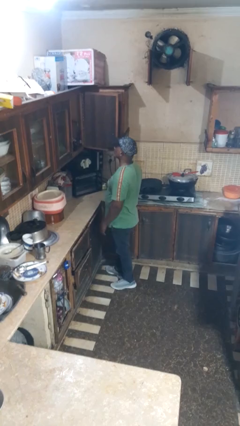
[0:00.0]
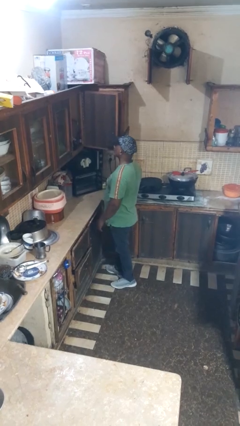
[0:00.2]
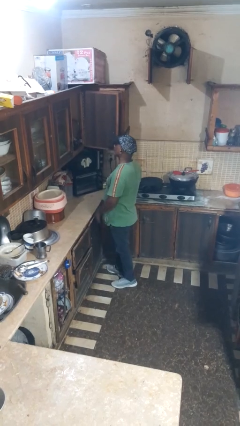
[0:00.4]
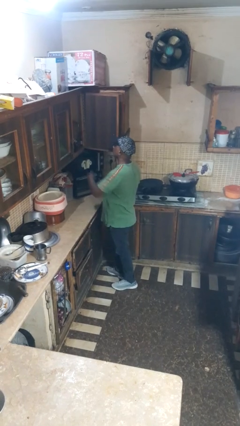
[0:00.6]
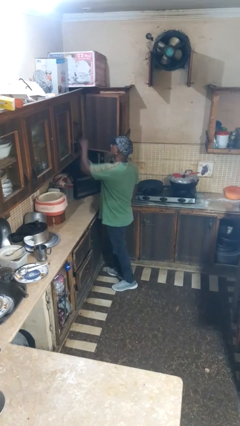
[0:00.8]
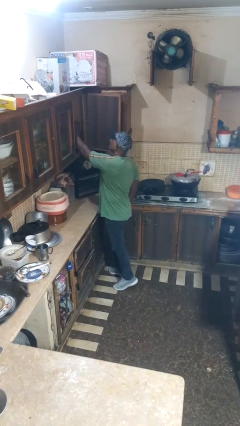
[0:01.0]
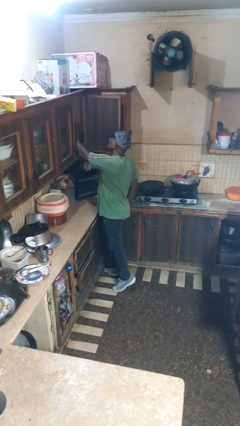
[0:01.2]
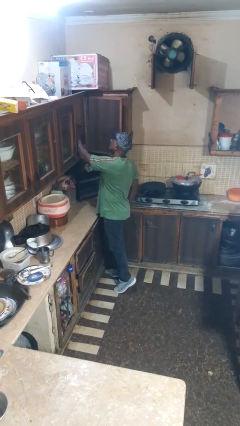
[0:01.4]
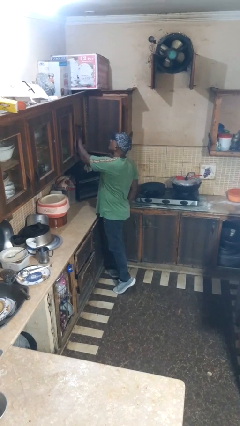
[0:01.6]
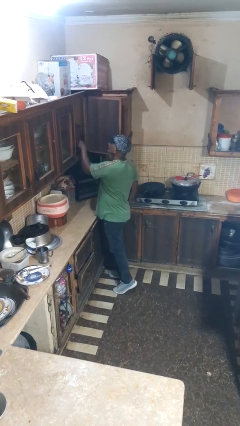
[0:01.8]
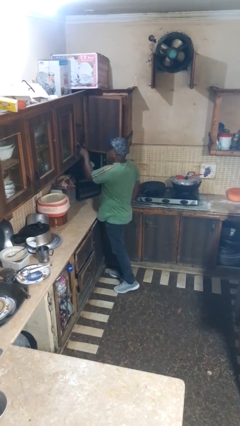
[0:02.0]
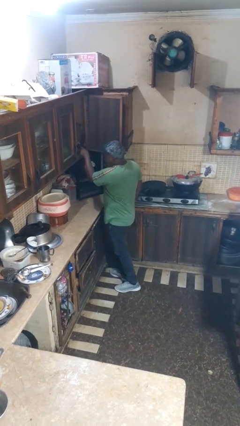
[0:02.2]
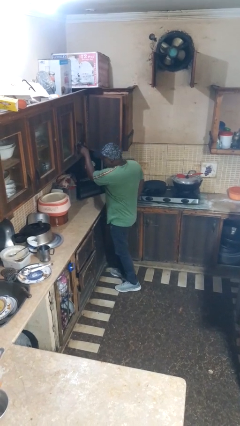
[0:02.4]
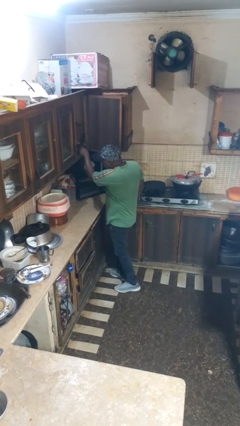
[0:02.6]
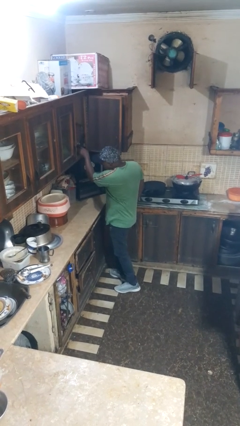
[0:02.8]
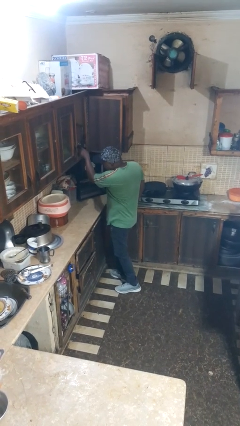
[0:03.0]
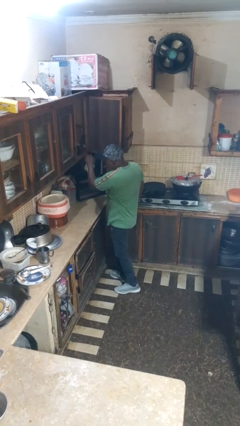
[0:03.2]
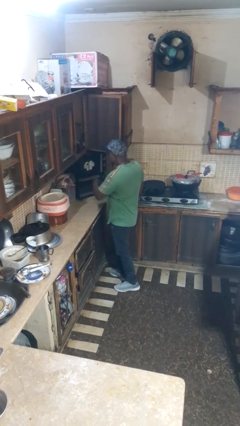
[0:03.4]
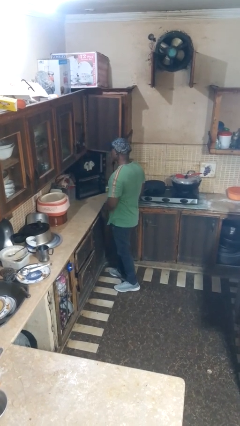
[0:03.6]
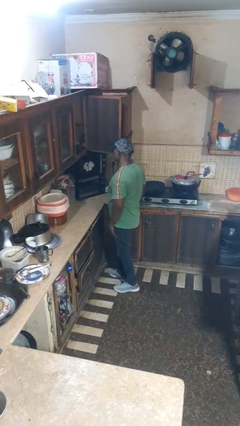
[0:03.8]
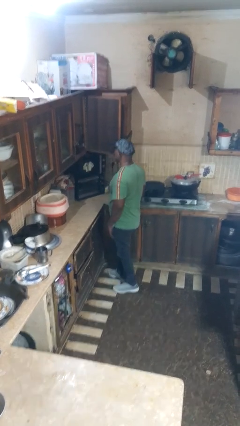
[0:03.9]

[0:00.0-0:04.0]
person searches in cabinet

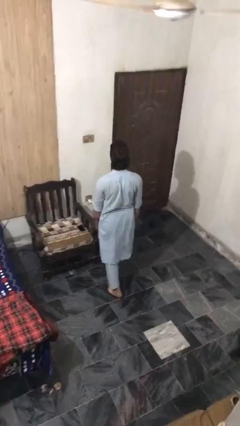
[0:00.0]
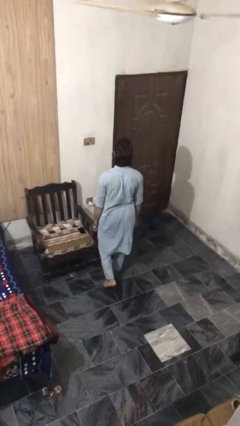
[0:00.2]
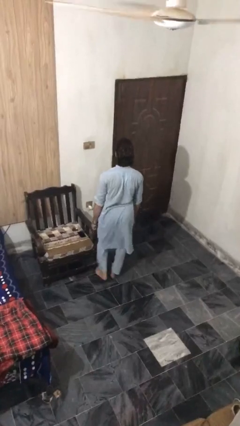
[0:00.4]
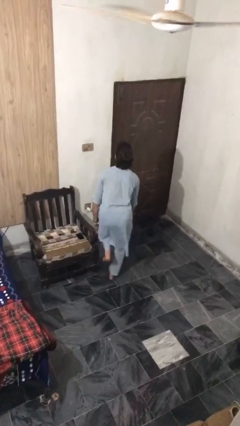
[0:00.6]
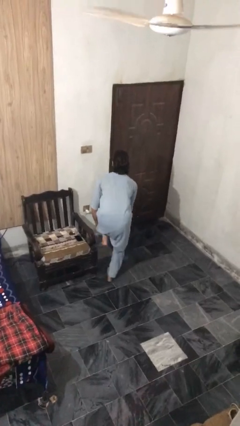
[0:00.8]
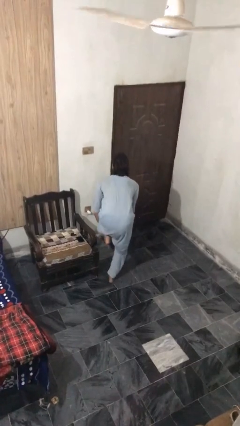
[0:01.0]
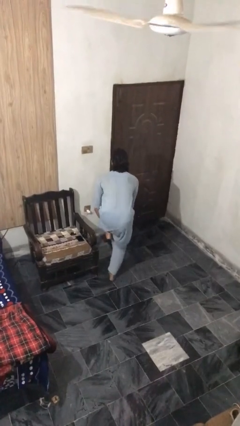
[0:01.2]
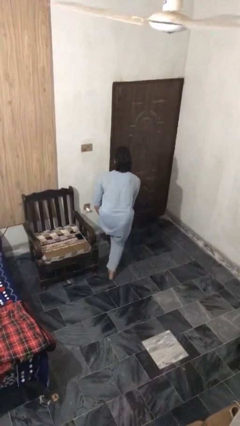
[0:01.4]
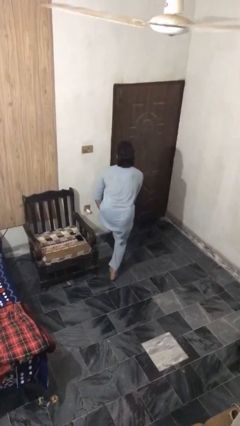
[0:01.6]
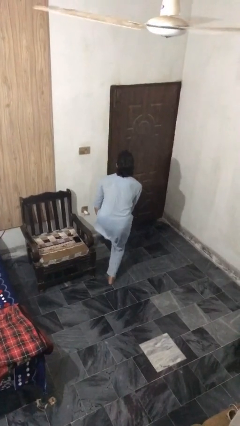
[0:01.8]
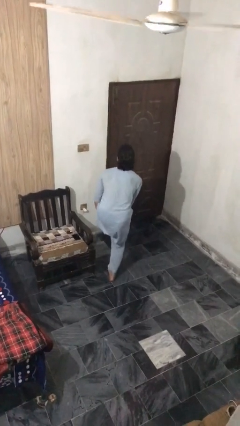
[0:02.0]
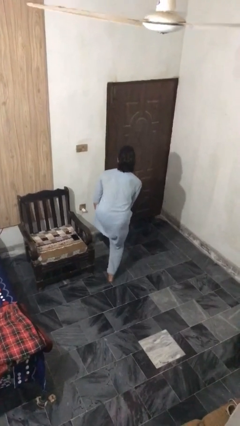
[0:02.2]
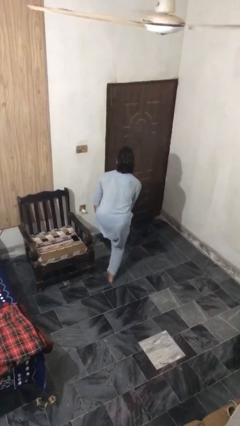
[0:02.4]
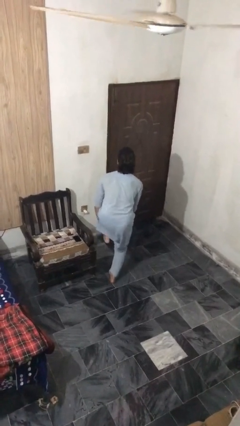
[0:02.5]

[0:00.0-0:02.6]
person stubs toe

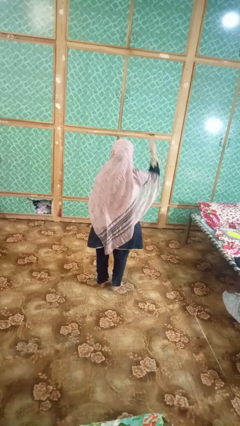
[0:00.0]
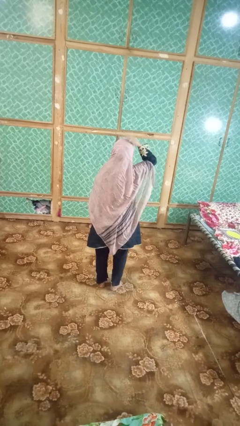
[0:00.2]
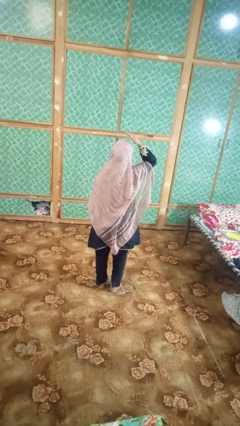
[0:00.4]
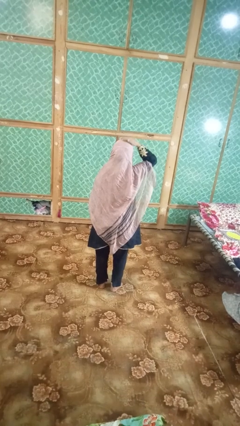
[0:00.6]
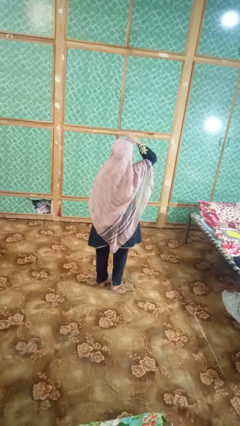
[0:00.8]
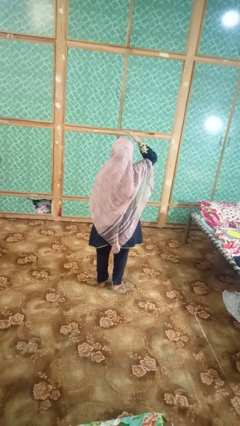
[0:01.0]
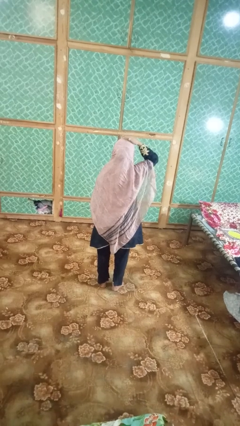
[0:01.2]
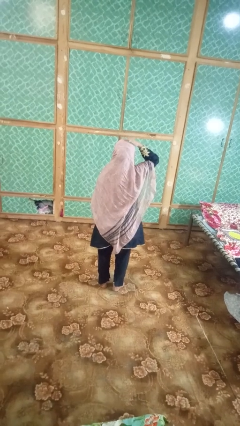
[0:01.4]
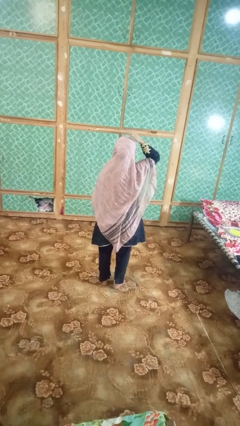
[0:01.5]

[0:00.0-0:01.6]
person pats head

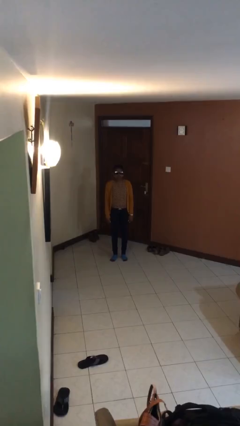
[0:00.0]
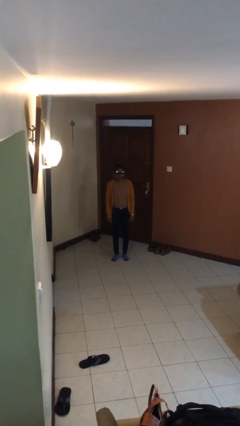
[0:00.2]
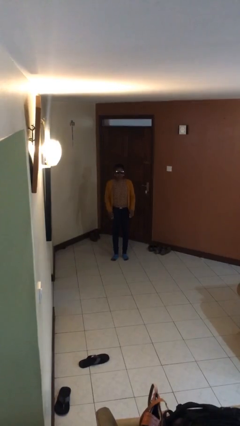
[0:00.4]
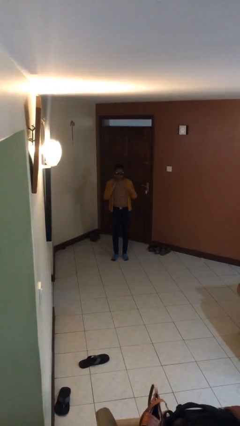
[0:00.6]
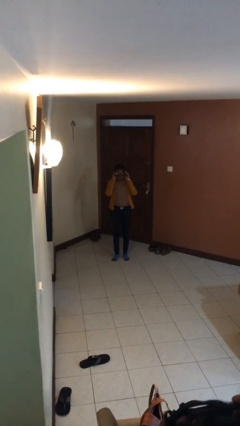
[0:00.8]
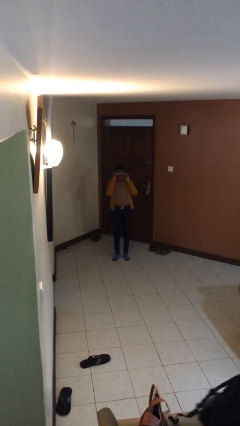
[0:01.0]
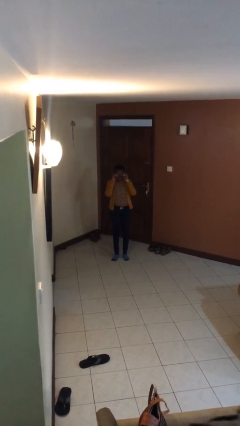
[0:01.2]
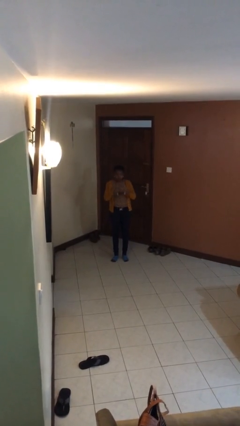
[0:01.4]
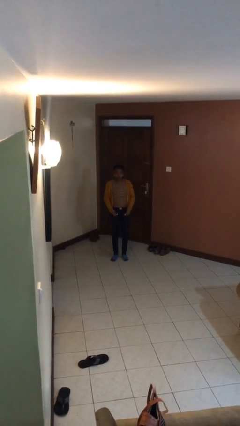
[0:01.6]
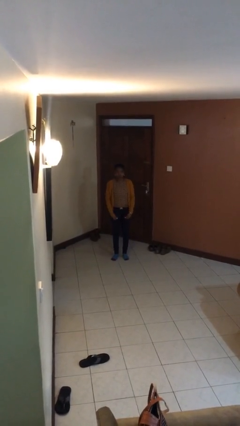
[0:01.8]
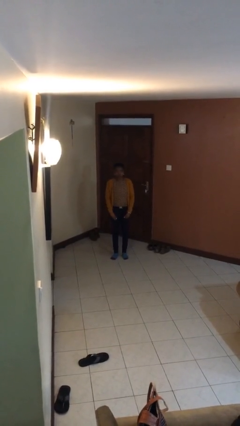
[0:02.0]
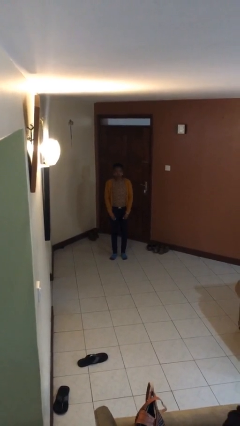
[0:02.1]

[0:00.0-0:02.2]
person takes off sunglasses

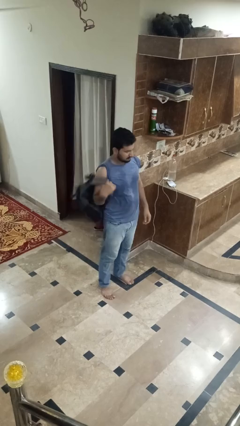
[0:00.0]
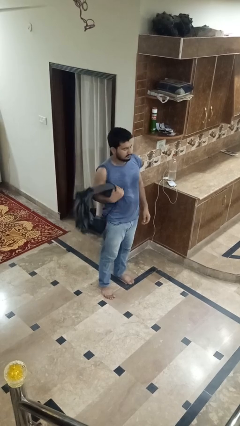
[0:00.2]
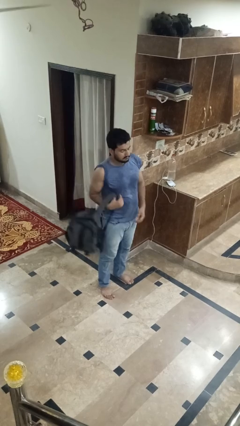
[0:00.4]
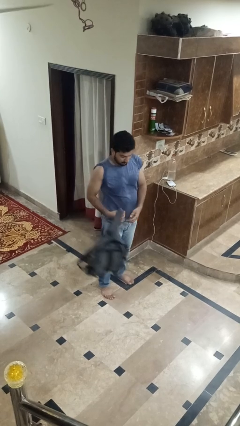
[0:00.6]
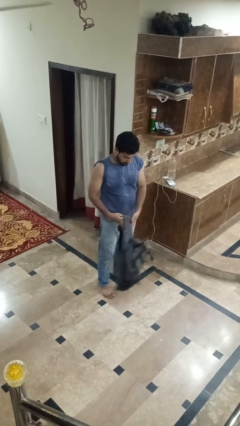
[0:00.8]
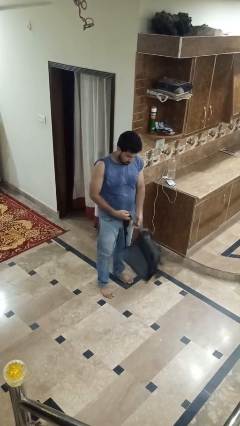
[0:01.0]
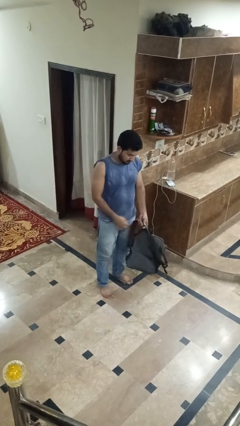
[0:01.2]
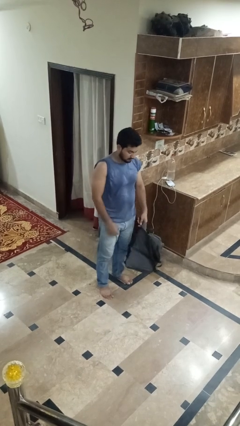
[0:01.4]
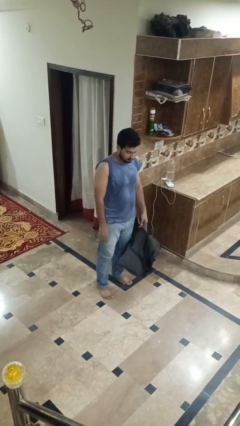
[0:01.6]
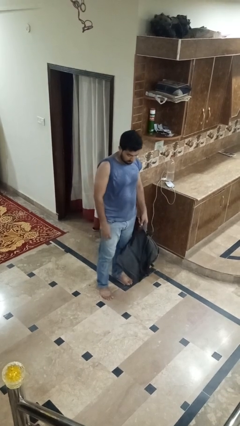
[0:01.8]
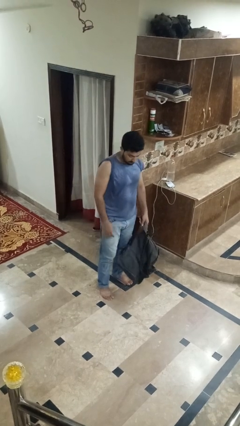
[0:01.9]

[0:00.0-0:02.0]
person takes off backpack

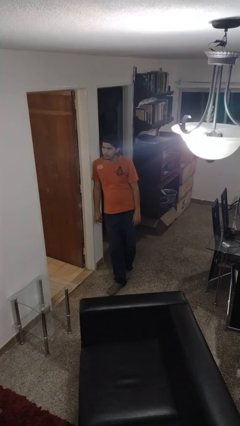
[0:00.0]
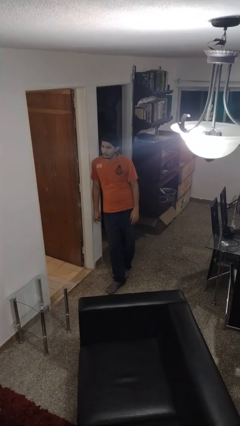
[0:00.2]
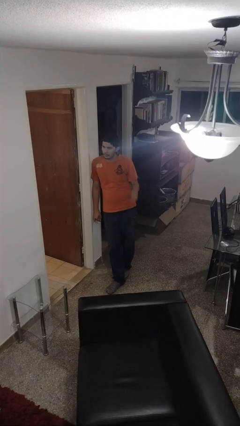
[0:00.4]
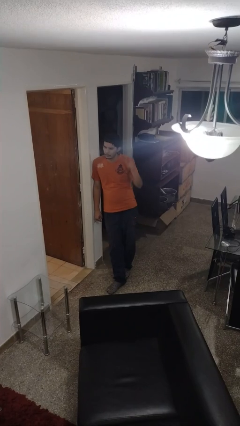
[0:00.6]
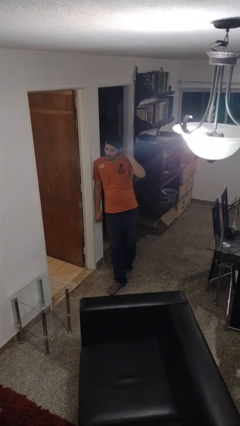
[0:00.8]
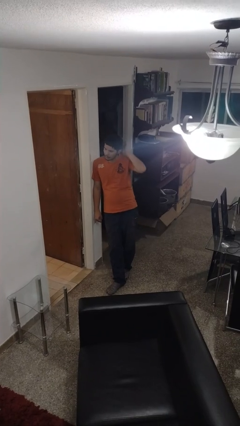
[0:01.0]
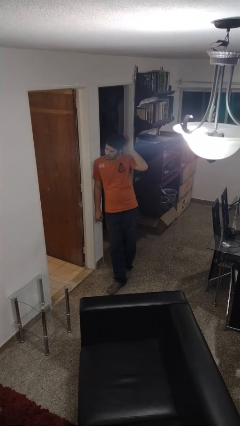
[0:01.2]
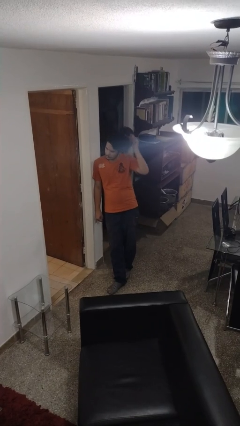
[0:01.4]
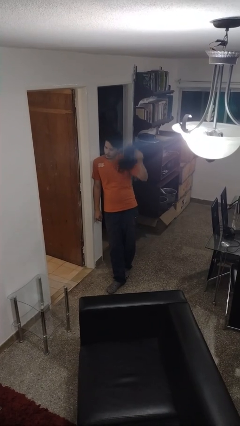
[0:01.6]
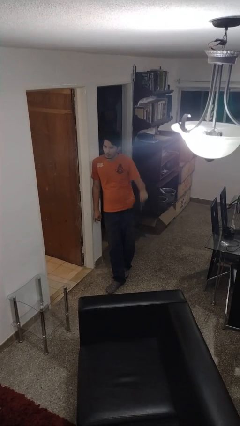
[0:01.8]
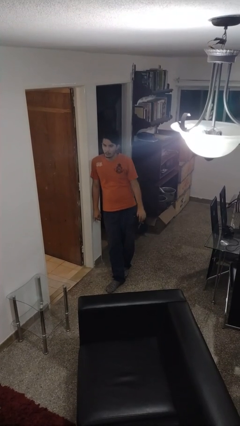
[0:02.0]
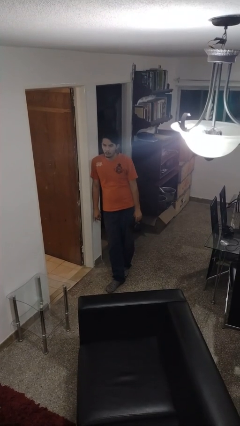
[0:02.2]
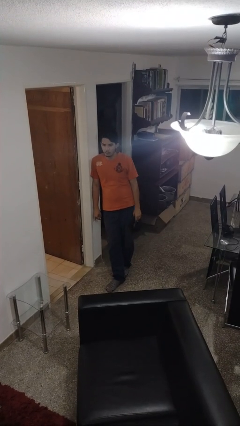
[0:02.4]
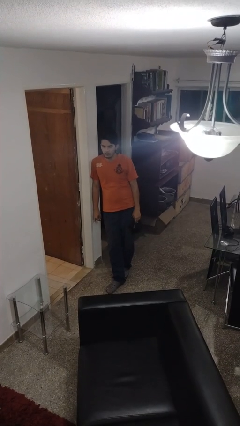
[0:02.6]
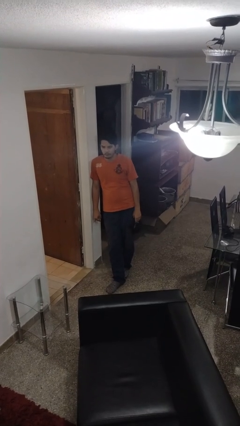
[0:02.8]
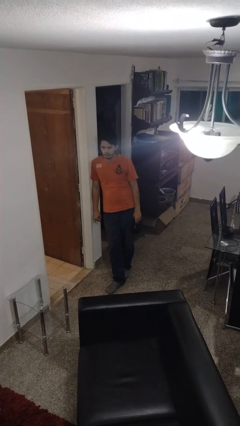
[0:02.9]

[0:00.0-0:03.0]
person takes off hat

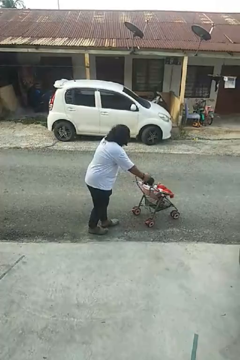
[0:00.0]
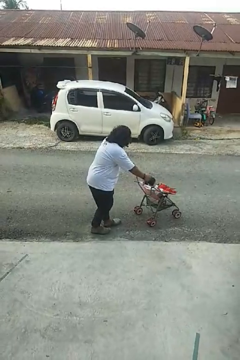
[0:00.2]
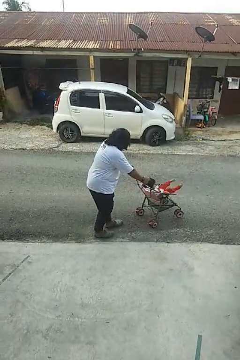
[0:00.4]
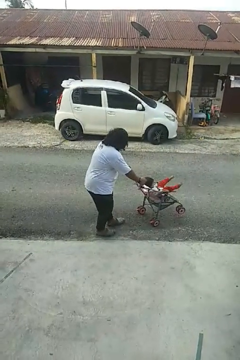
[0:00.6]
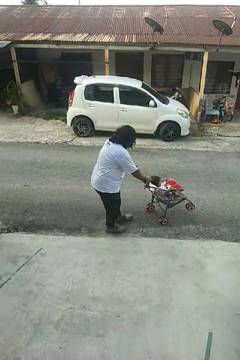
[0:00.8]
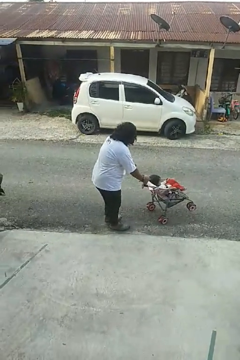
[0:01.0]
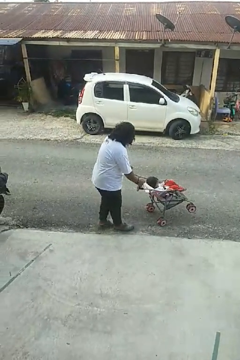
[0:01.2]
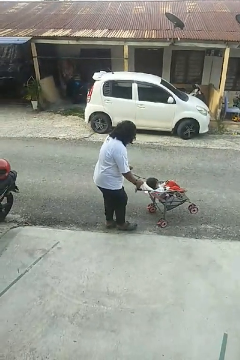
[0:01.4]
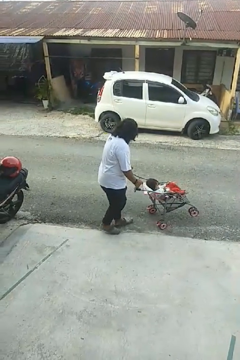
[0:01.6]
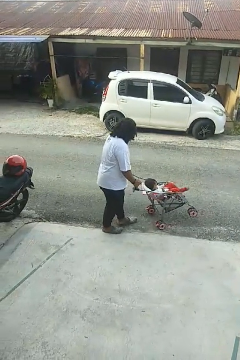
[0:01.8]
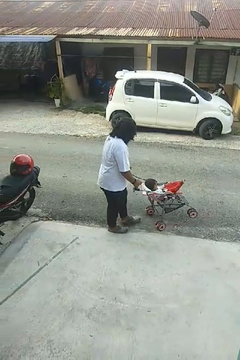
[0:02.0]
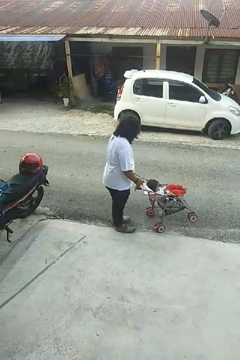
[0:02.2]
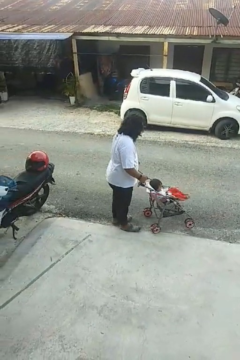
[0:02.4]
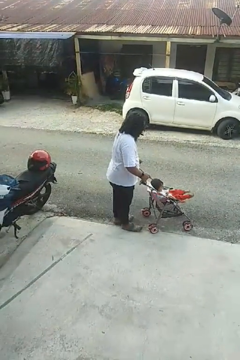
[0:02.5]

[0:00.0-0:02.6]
person pulls wheeled cart
